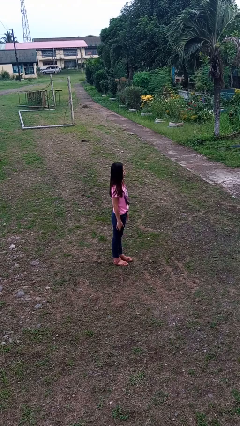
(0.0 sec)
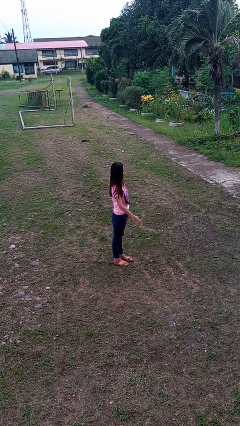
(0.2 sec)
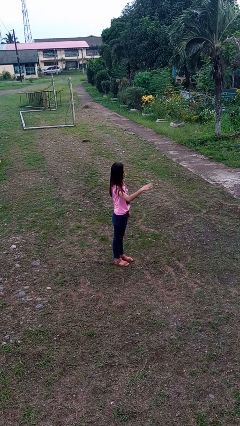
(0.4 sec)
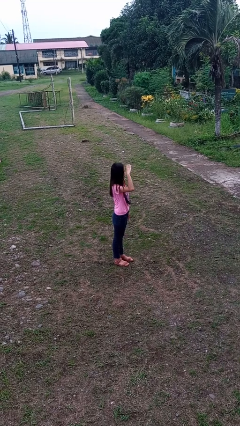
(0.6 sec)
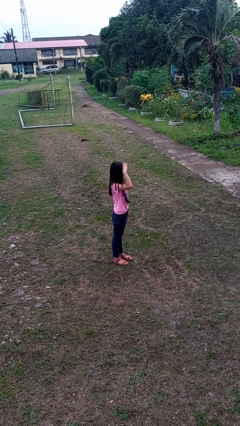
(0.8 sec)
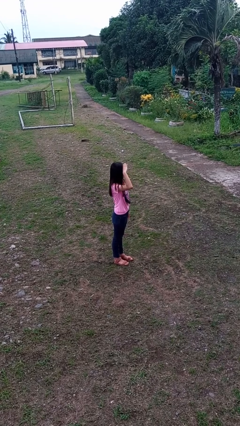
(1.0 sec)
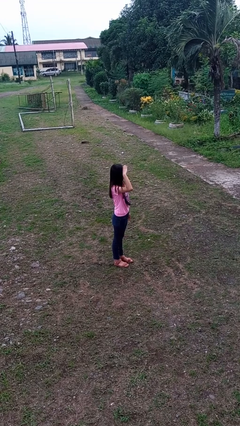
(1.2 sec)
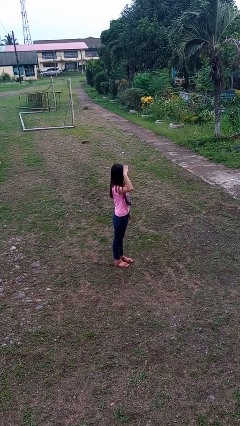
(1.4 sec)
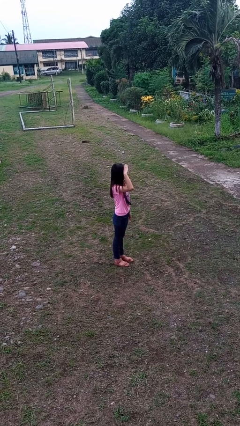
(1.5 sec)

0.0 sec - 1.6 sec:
person salutes

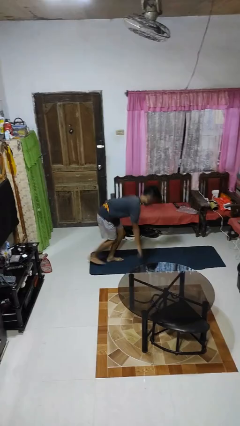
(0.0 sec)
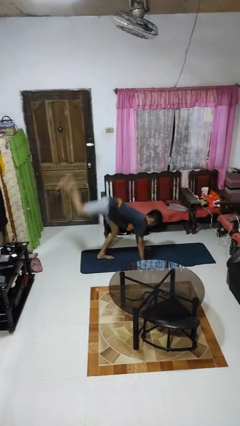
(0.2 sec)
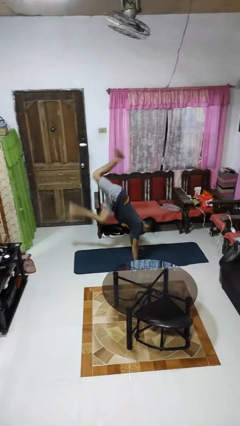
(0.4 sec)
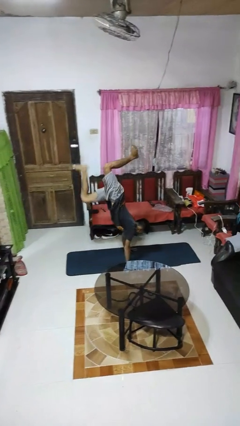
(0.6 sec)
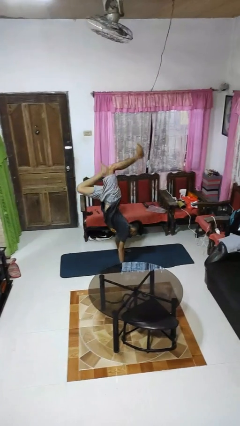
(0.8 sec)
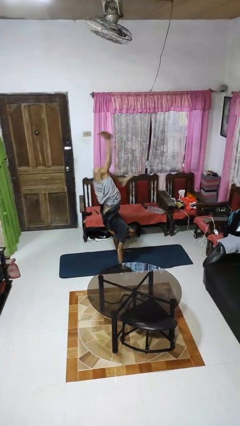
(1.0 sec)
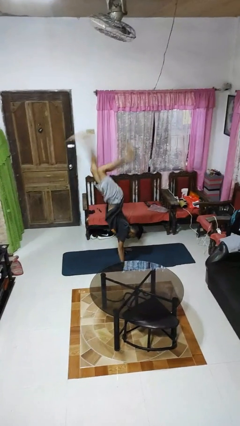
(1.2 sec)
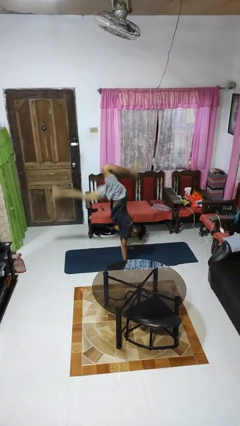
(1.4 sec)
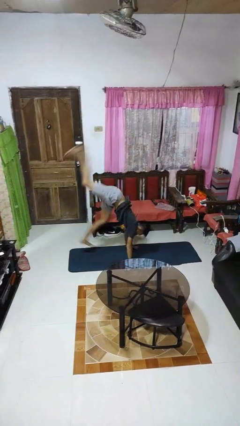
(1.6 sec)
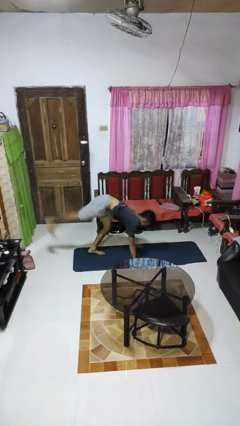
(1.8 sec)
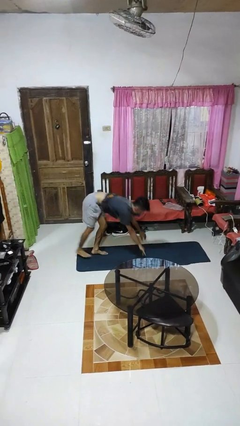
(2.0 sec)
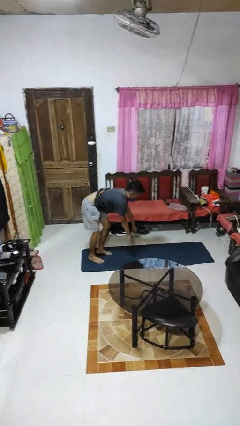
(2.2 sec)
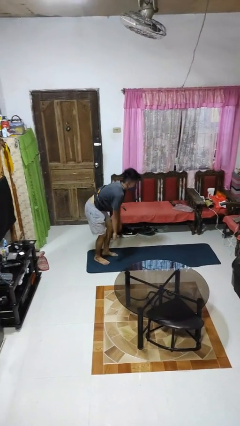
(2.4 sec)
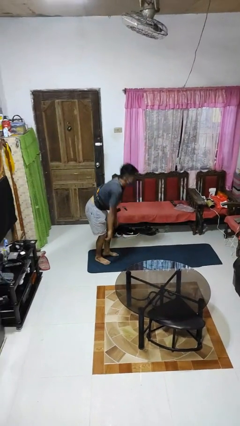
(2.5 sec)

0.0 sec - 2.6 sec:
person handstand

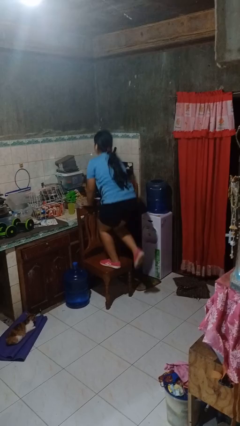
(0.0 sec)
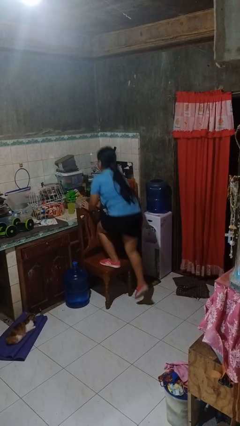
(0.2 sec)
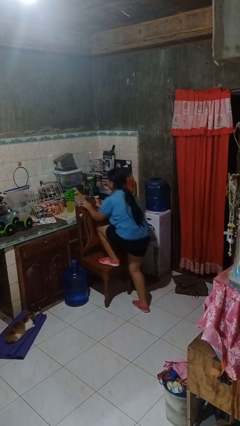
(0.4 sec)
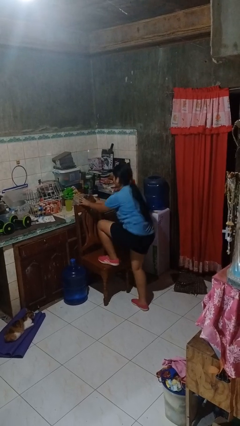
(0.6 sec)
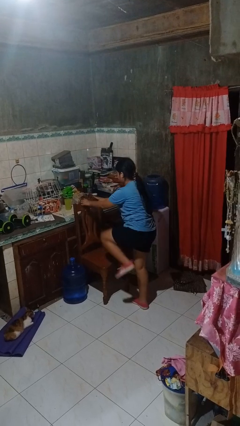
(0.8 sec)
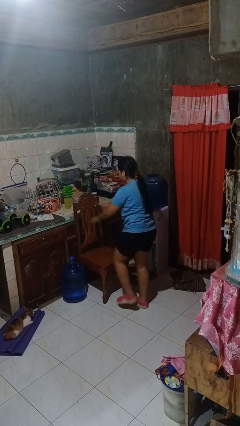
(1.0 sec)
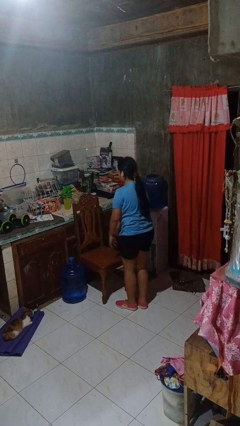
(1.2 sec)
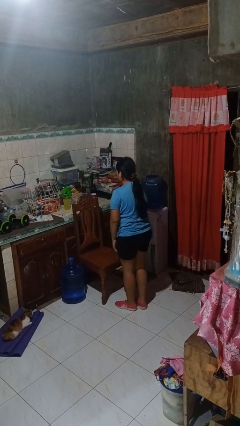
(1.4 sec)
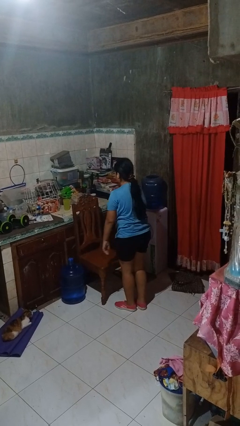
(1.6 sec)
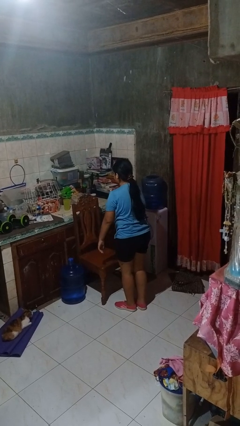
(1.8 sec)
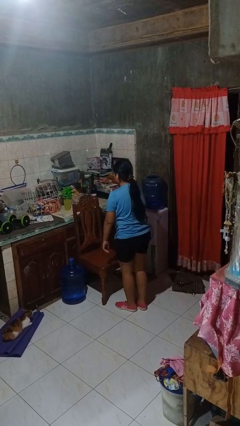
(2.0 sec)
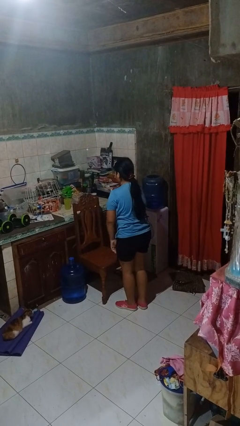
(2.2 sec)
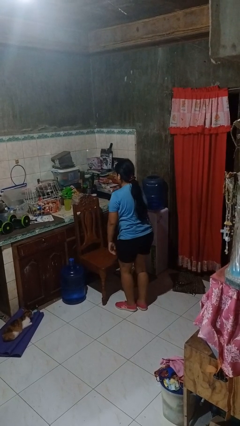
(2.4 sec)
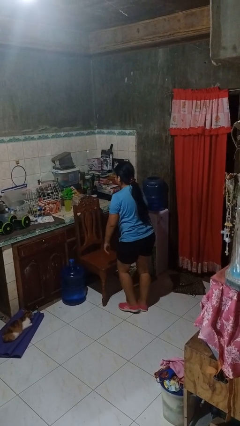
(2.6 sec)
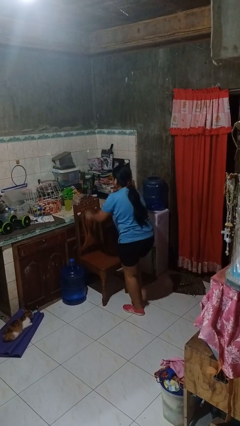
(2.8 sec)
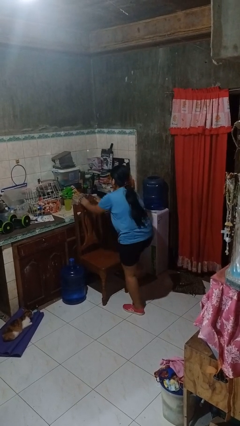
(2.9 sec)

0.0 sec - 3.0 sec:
person climbs off chair

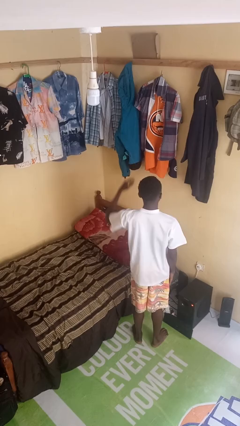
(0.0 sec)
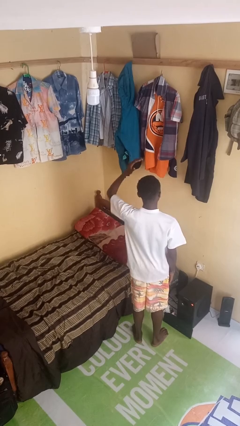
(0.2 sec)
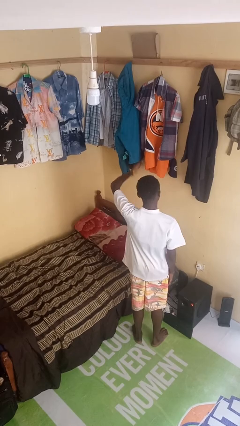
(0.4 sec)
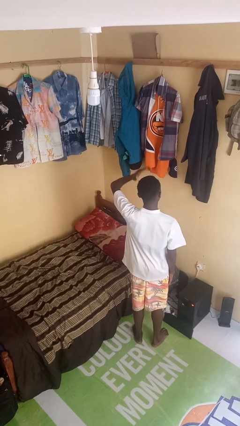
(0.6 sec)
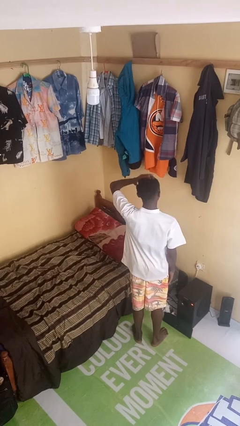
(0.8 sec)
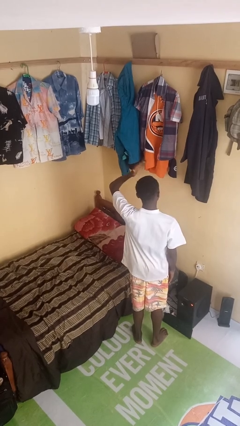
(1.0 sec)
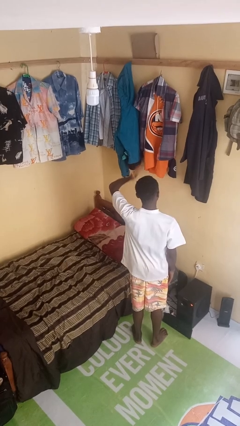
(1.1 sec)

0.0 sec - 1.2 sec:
person pats head

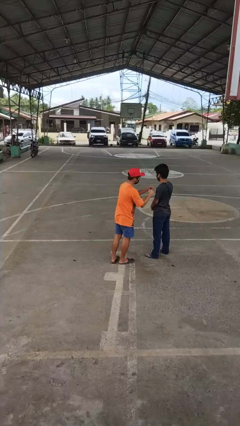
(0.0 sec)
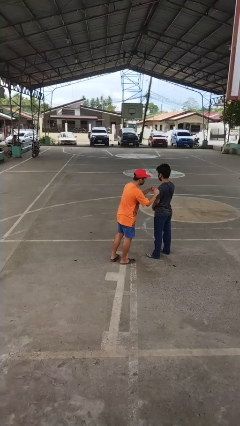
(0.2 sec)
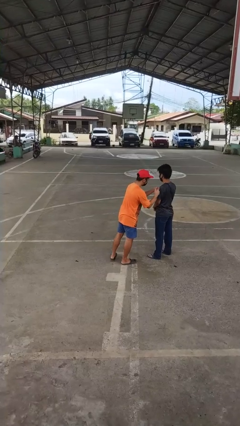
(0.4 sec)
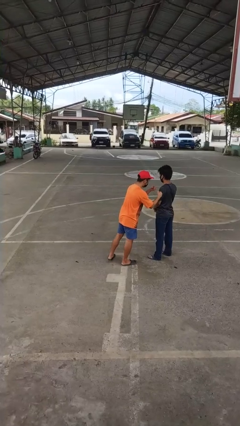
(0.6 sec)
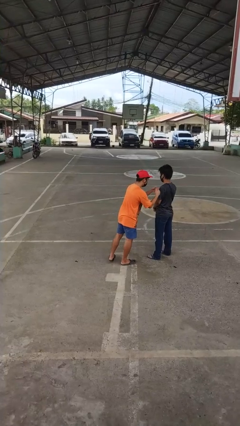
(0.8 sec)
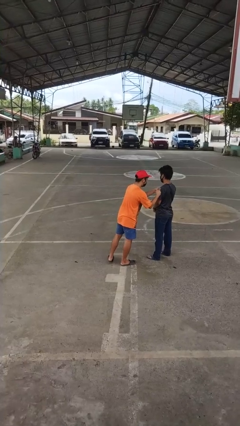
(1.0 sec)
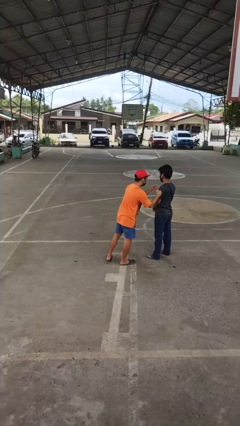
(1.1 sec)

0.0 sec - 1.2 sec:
person pounds shoulders of person

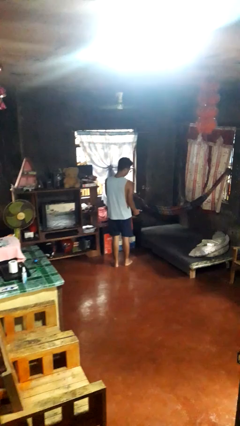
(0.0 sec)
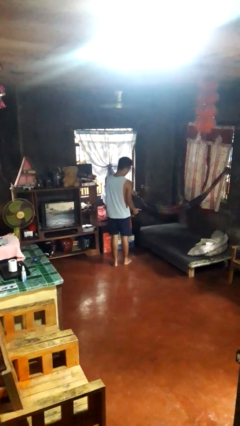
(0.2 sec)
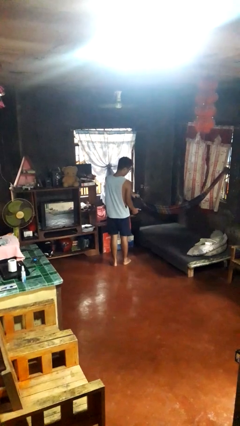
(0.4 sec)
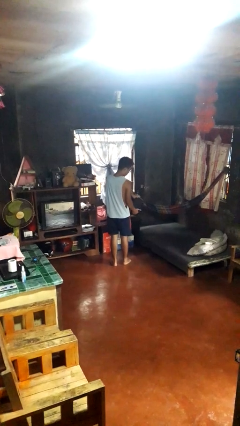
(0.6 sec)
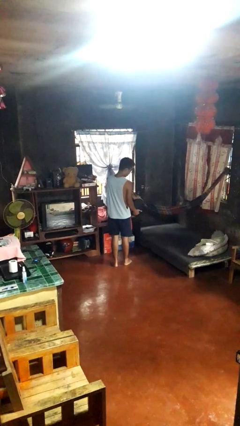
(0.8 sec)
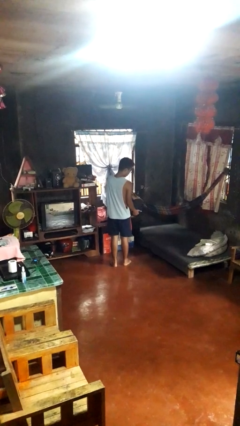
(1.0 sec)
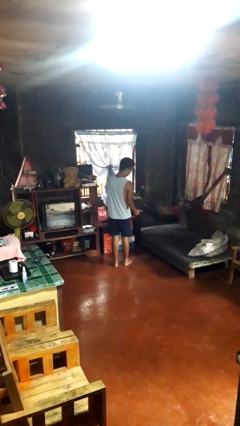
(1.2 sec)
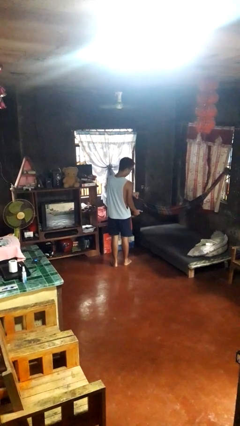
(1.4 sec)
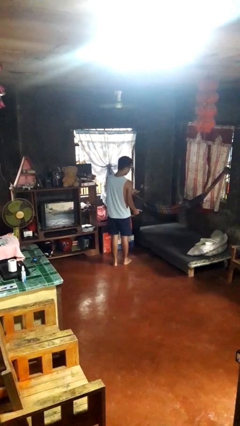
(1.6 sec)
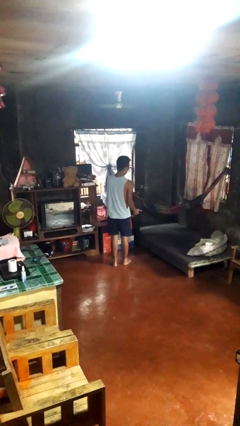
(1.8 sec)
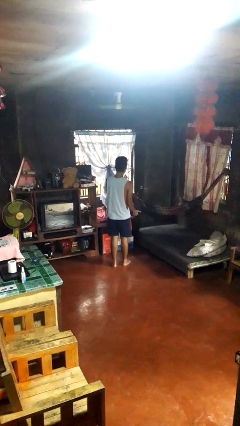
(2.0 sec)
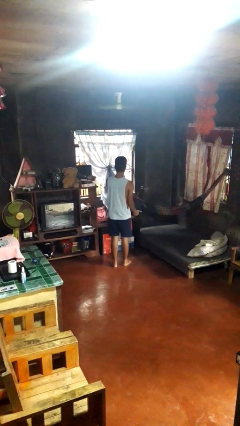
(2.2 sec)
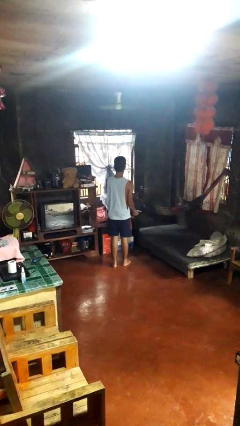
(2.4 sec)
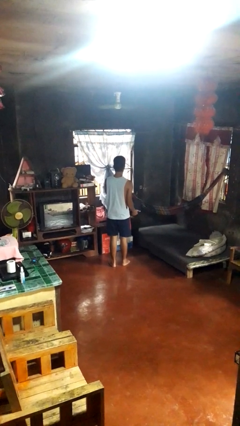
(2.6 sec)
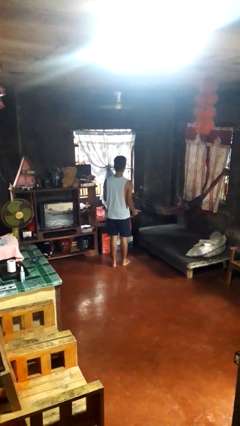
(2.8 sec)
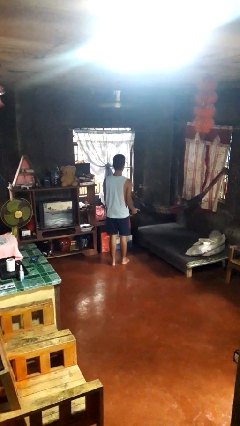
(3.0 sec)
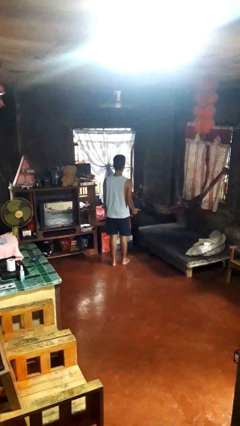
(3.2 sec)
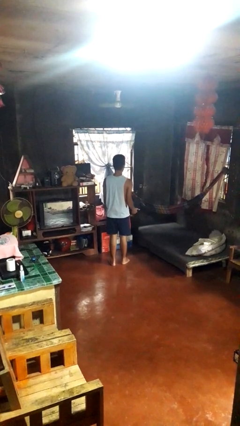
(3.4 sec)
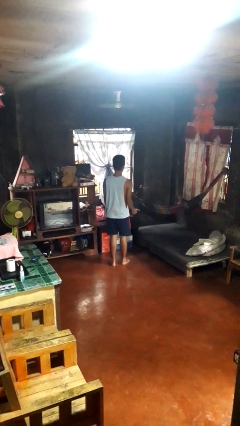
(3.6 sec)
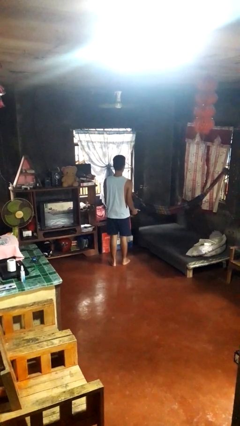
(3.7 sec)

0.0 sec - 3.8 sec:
person eats snack from bag

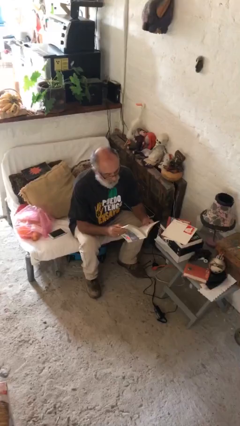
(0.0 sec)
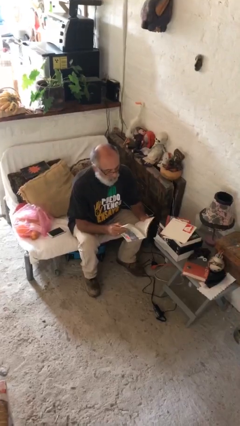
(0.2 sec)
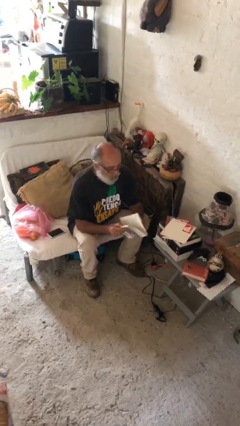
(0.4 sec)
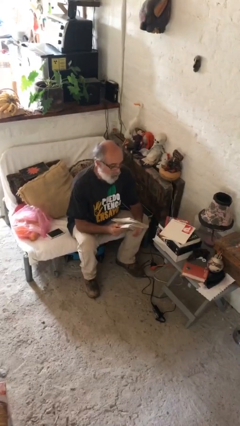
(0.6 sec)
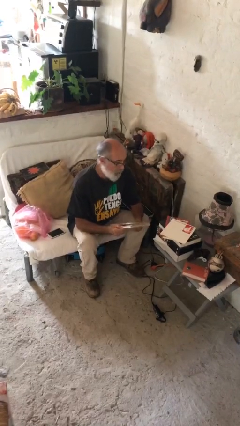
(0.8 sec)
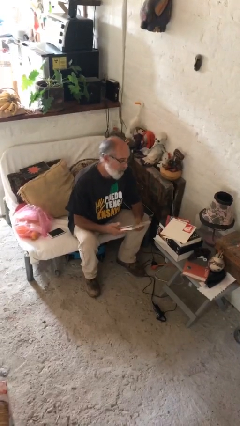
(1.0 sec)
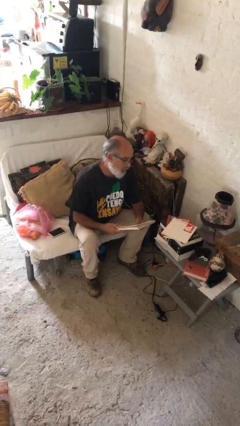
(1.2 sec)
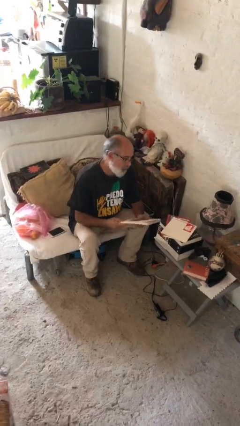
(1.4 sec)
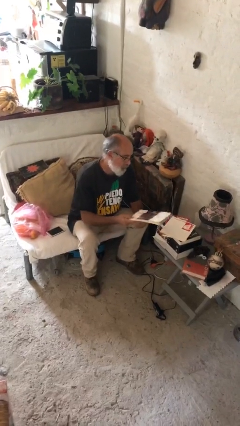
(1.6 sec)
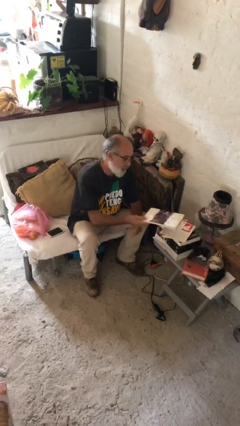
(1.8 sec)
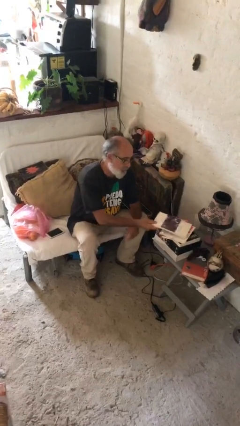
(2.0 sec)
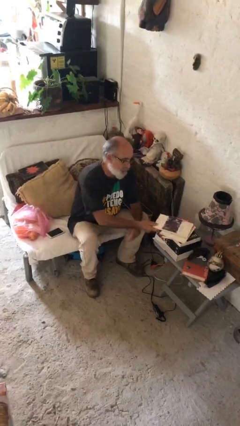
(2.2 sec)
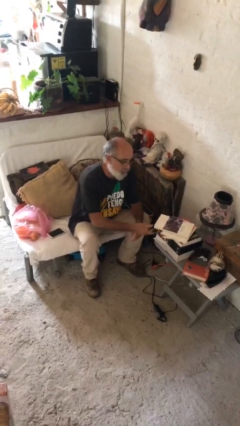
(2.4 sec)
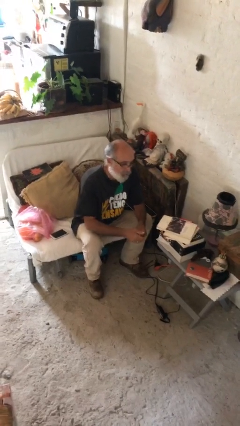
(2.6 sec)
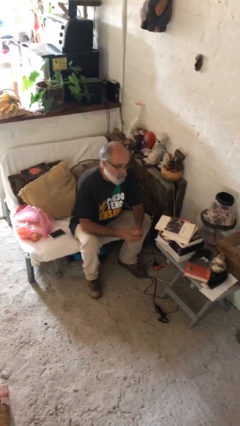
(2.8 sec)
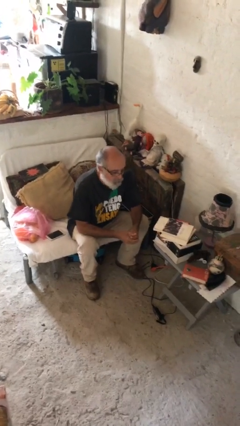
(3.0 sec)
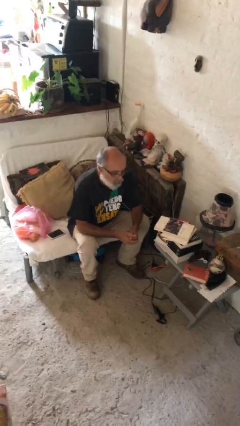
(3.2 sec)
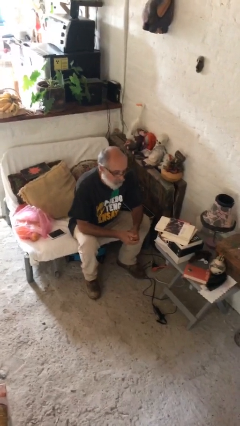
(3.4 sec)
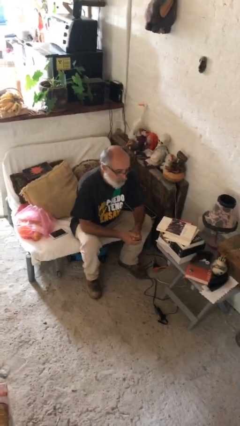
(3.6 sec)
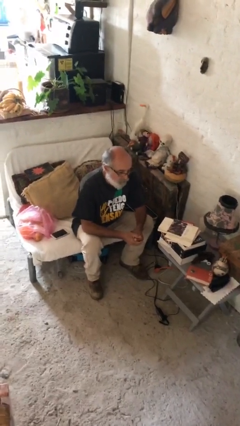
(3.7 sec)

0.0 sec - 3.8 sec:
person puts down object on table
